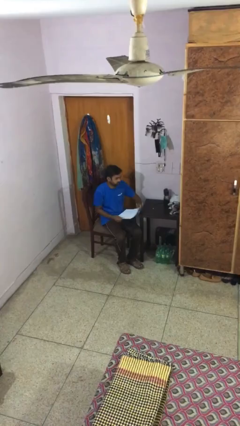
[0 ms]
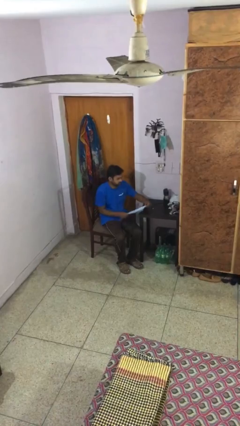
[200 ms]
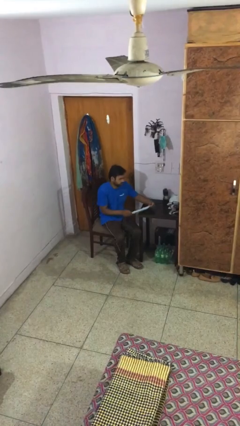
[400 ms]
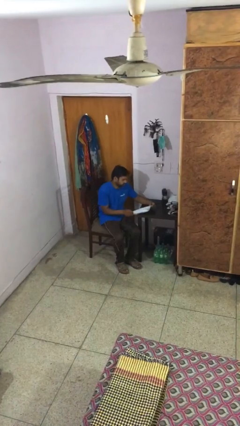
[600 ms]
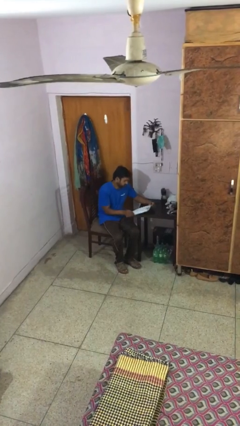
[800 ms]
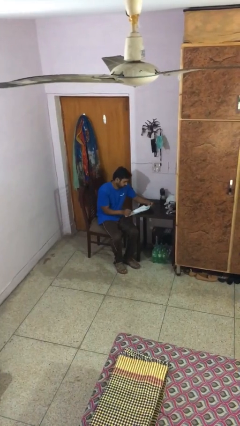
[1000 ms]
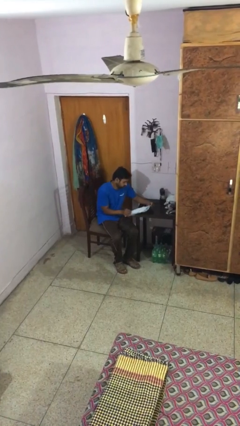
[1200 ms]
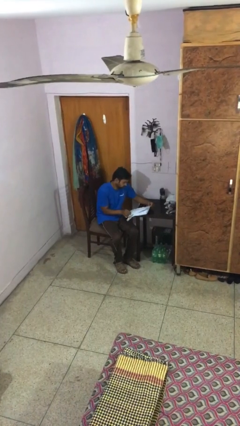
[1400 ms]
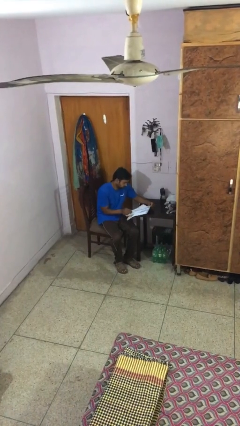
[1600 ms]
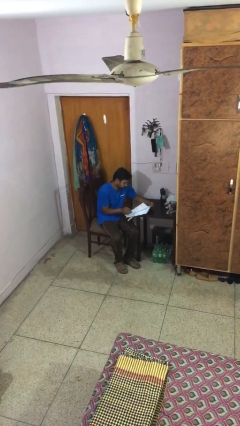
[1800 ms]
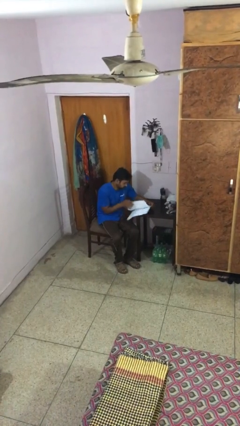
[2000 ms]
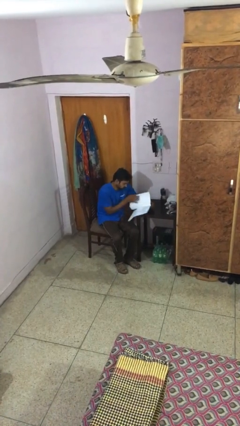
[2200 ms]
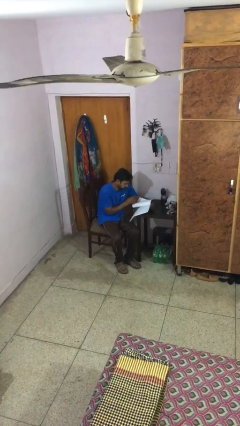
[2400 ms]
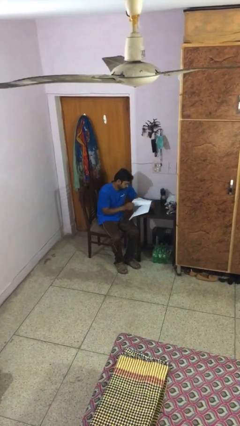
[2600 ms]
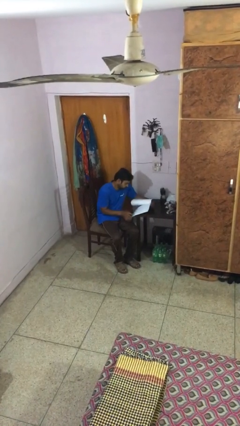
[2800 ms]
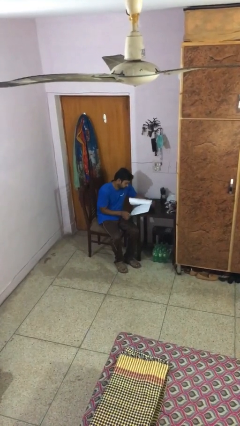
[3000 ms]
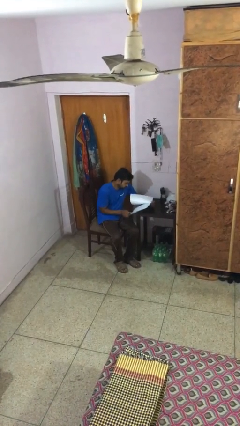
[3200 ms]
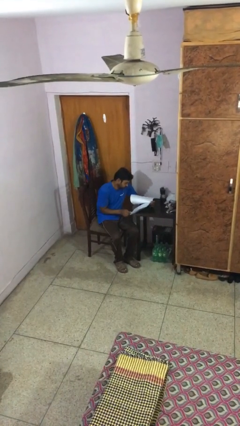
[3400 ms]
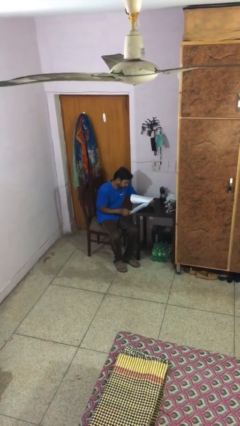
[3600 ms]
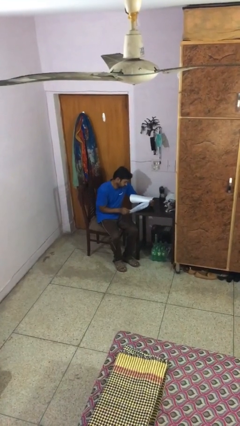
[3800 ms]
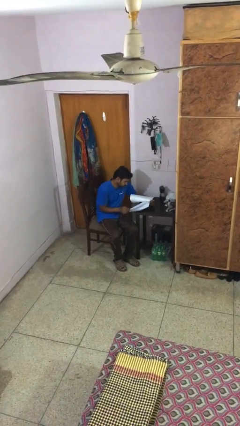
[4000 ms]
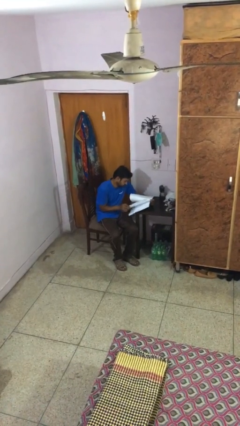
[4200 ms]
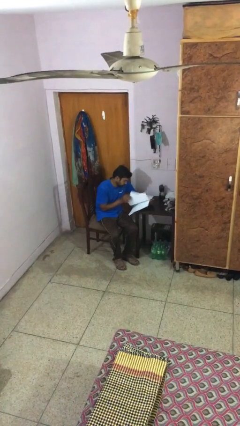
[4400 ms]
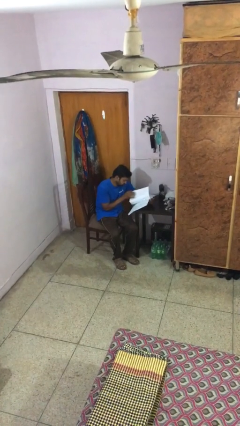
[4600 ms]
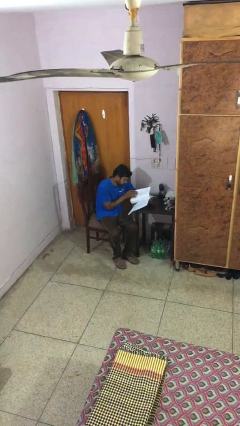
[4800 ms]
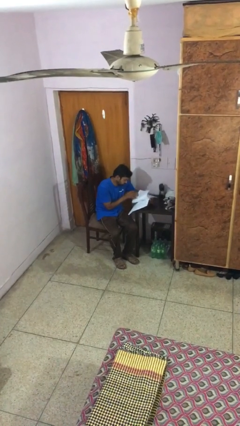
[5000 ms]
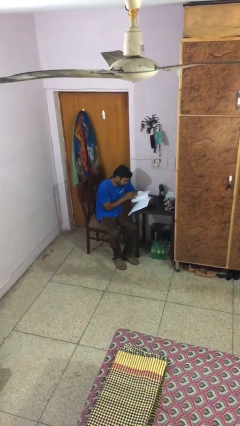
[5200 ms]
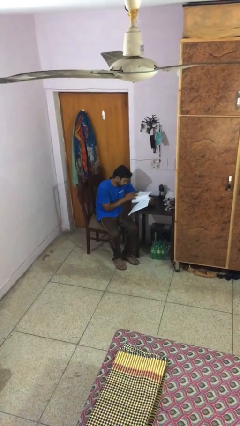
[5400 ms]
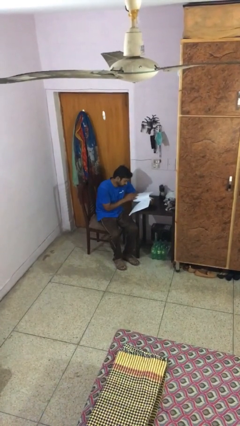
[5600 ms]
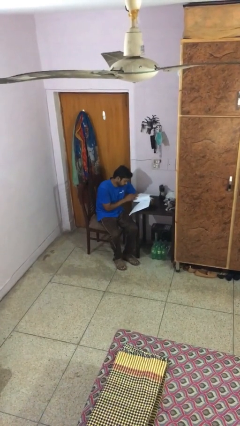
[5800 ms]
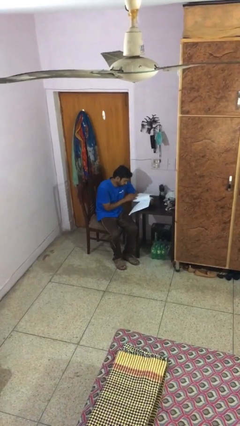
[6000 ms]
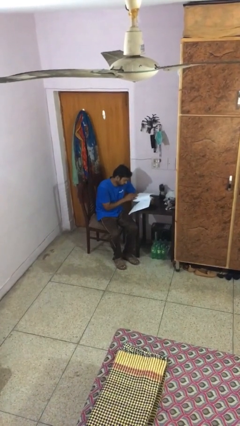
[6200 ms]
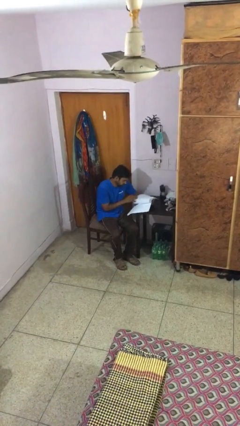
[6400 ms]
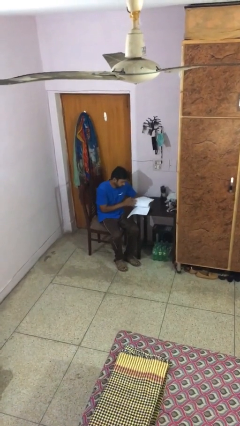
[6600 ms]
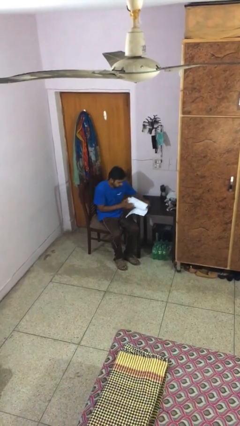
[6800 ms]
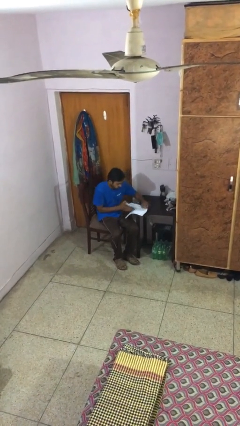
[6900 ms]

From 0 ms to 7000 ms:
person reads document

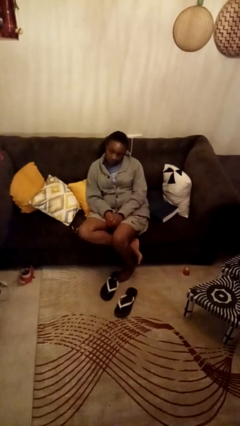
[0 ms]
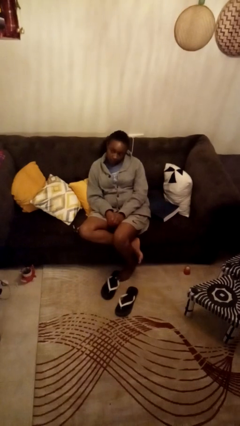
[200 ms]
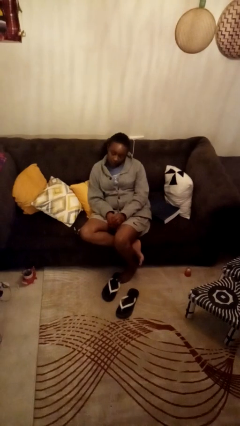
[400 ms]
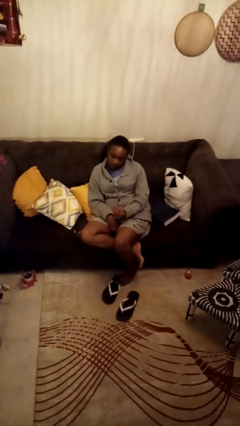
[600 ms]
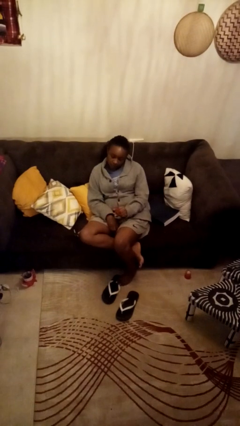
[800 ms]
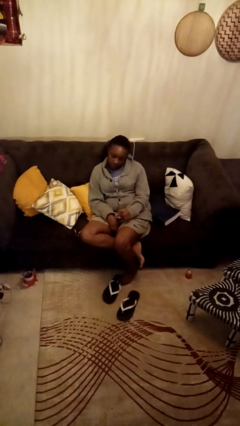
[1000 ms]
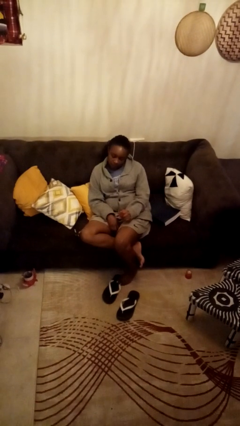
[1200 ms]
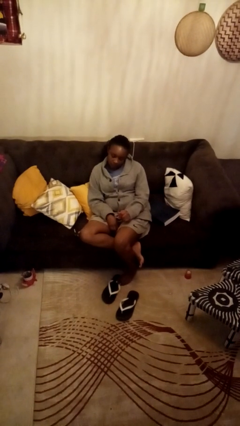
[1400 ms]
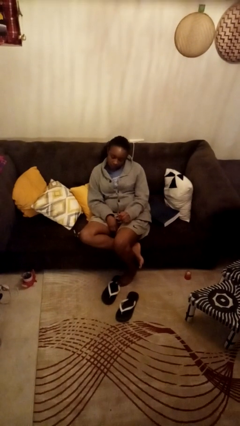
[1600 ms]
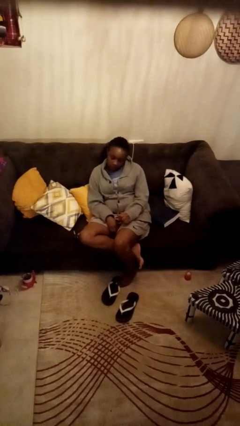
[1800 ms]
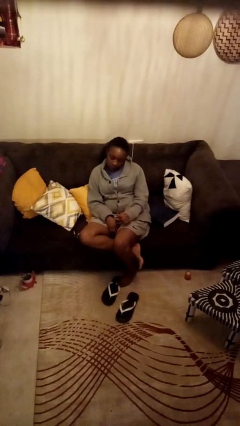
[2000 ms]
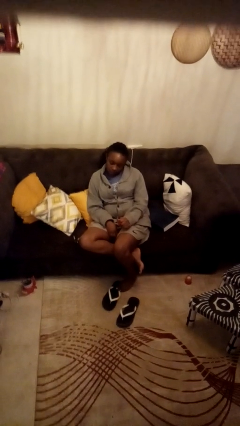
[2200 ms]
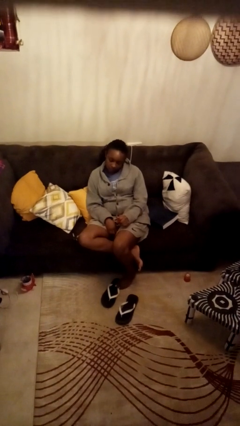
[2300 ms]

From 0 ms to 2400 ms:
person squeezes object

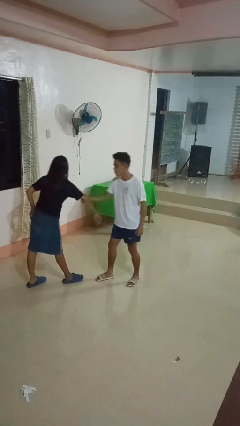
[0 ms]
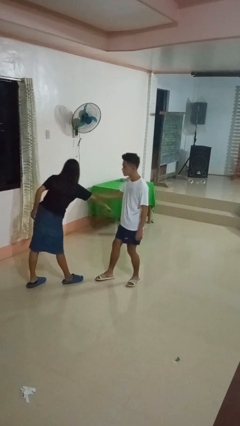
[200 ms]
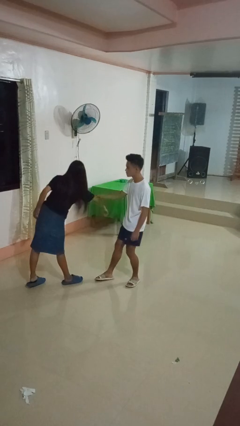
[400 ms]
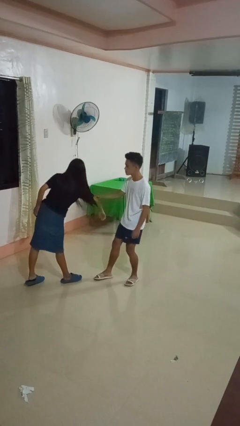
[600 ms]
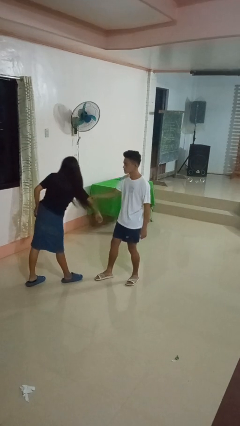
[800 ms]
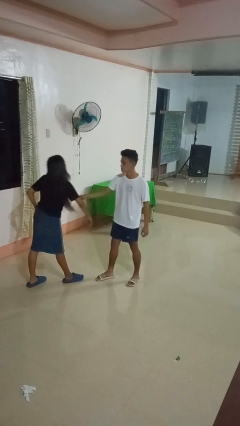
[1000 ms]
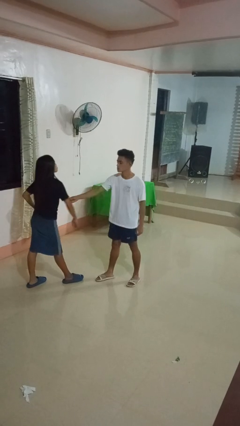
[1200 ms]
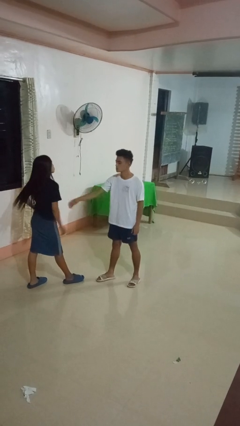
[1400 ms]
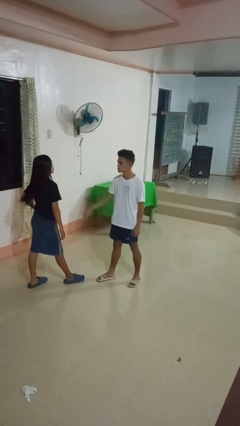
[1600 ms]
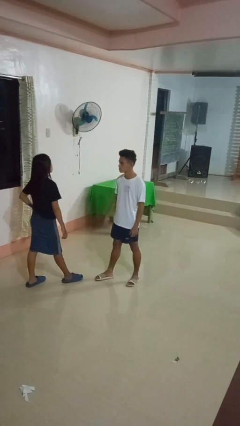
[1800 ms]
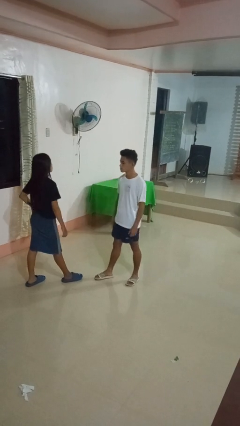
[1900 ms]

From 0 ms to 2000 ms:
person grabs person by bicep

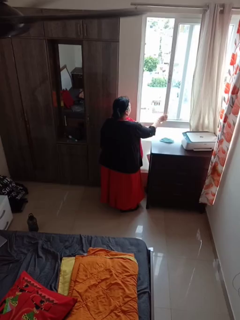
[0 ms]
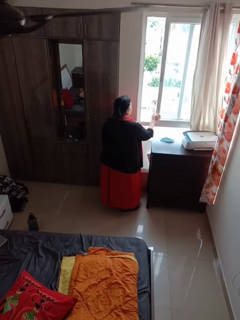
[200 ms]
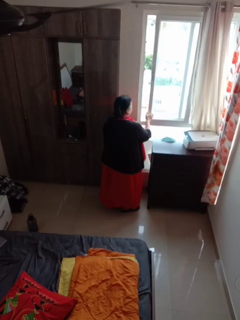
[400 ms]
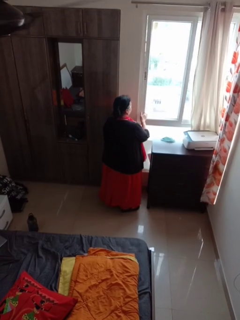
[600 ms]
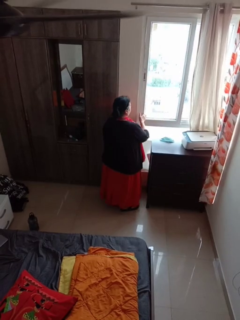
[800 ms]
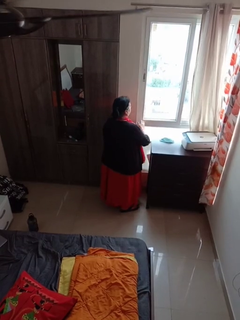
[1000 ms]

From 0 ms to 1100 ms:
person closes home window

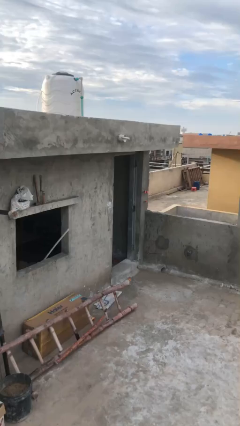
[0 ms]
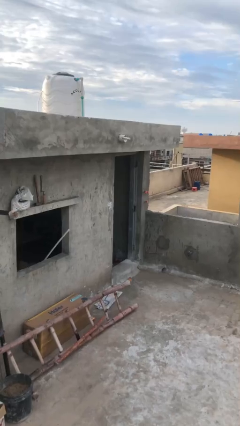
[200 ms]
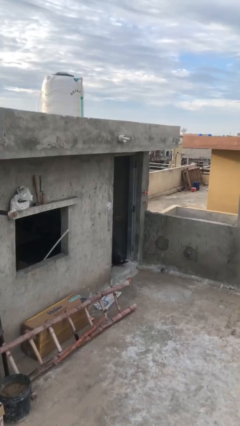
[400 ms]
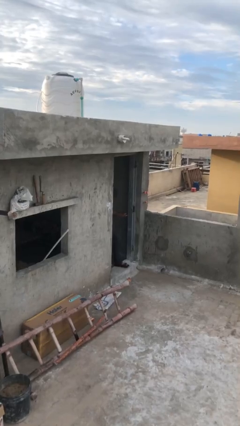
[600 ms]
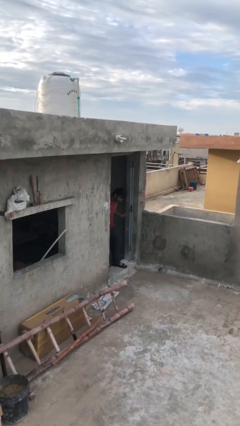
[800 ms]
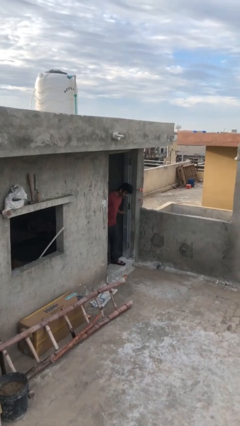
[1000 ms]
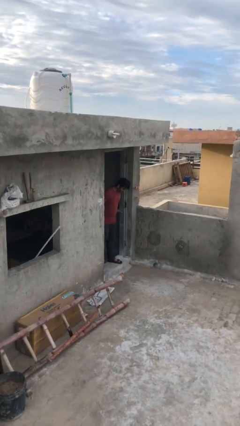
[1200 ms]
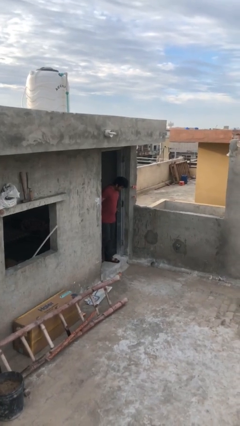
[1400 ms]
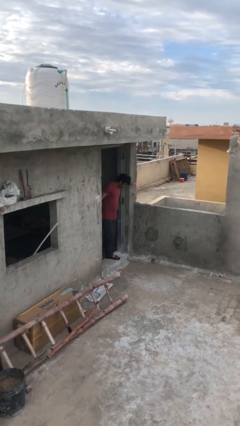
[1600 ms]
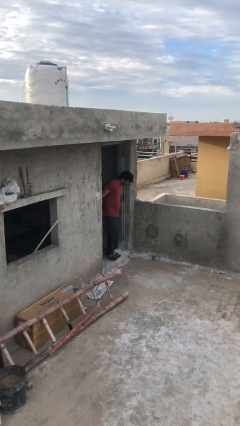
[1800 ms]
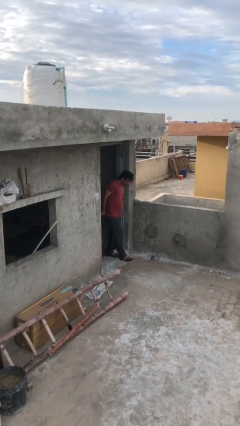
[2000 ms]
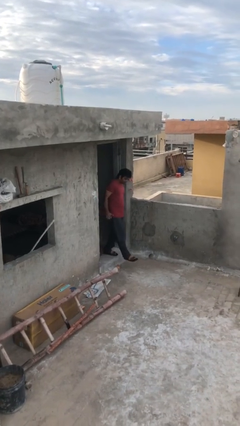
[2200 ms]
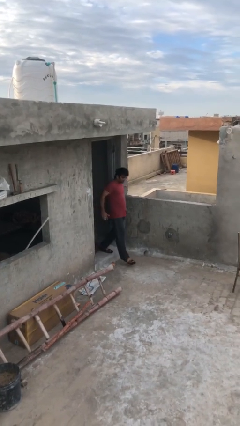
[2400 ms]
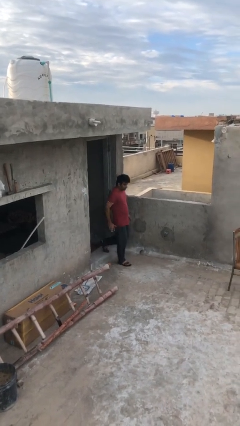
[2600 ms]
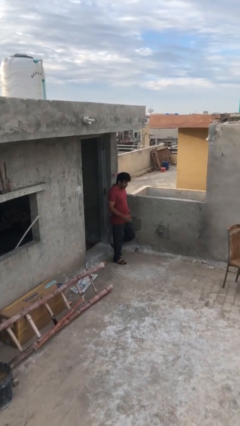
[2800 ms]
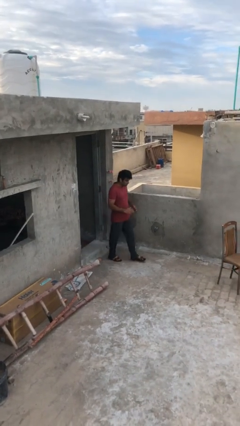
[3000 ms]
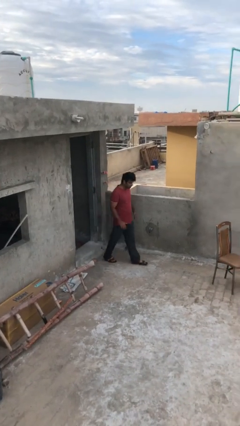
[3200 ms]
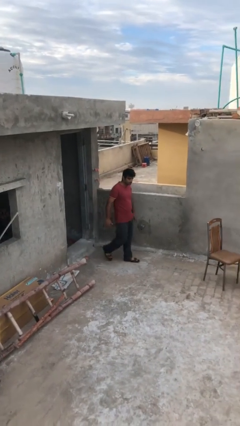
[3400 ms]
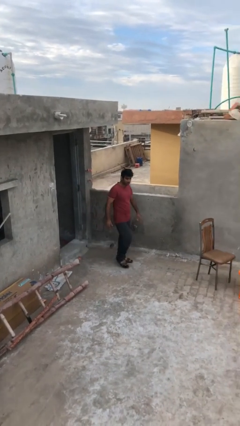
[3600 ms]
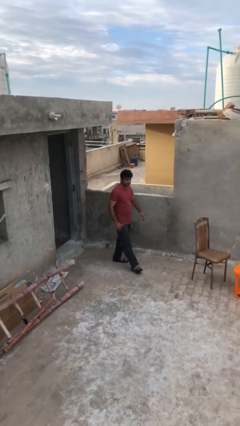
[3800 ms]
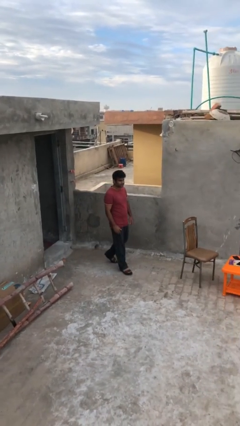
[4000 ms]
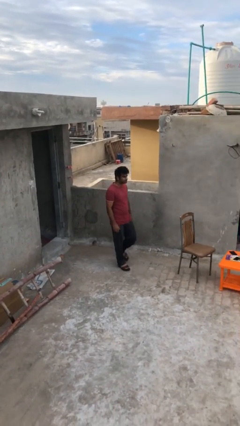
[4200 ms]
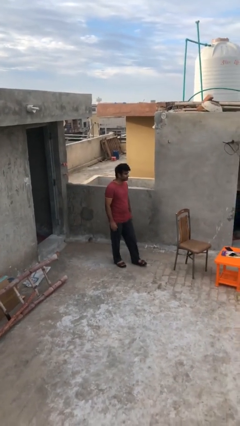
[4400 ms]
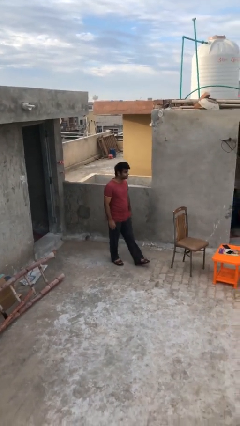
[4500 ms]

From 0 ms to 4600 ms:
person enters scene through structure

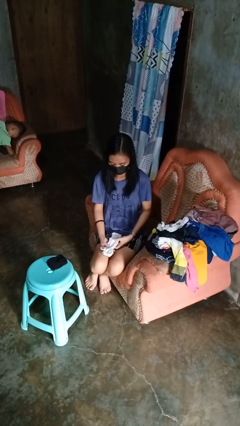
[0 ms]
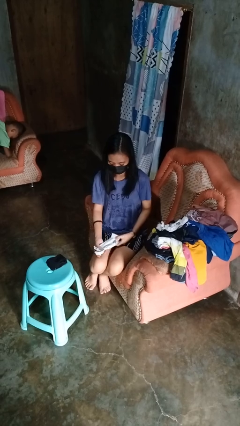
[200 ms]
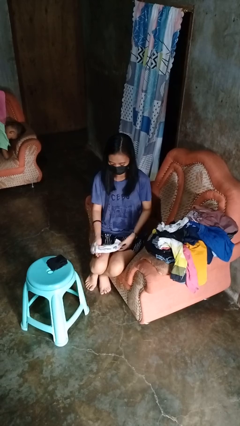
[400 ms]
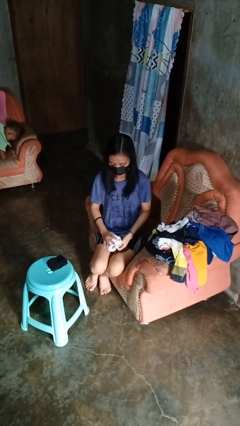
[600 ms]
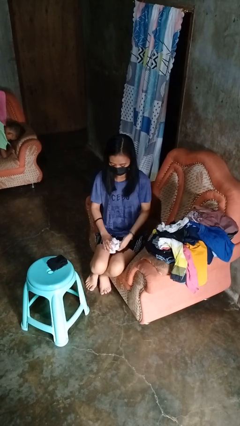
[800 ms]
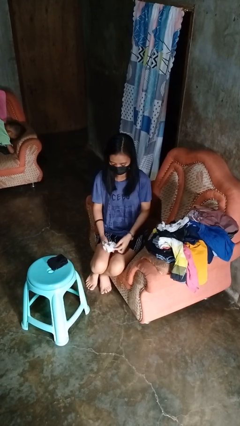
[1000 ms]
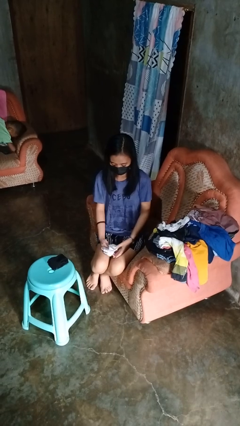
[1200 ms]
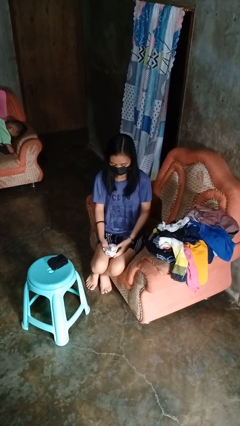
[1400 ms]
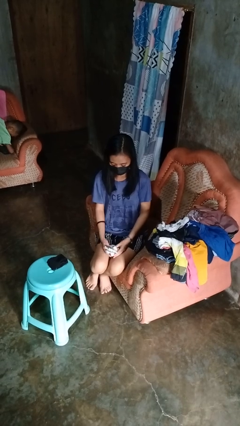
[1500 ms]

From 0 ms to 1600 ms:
person folds socks
